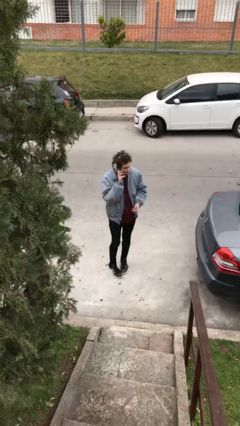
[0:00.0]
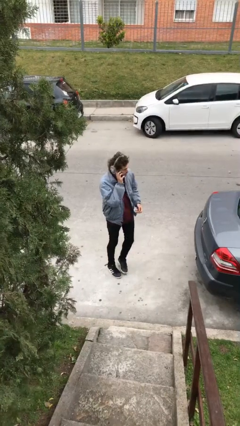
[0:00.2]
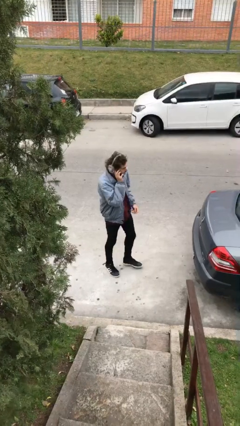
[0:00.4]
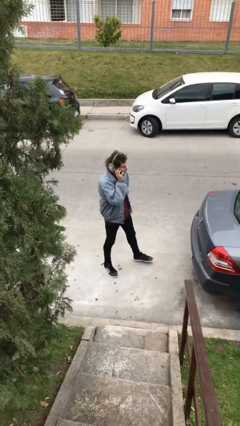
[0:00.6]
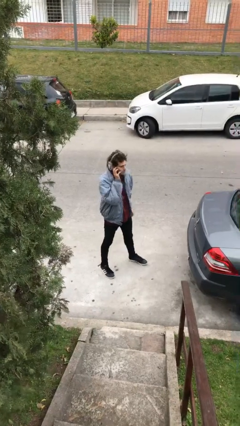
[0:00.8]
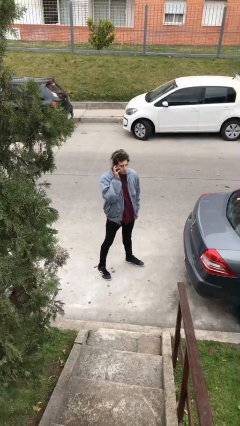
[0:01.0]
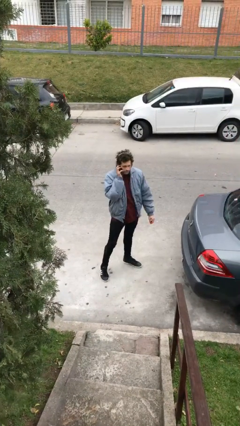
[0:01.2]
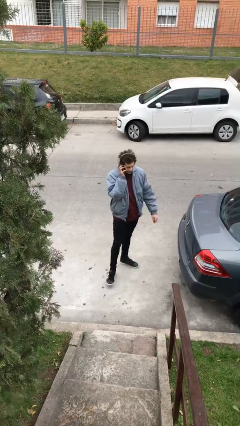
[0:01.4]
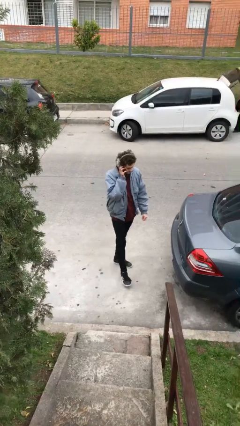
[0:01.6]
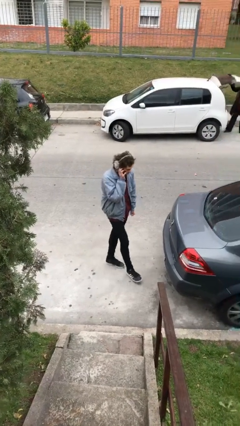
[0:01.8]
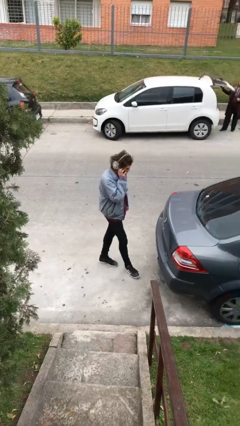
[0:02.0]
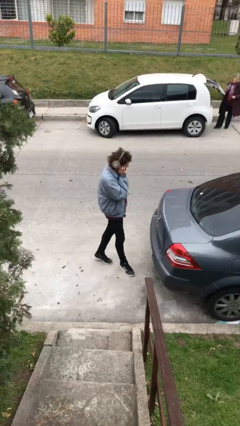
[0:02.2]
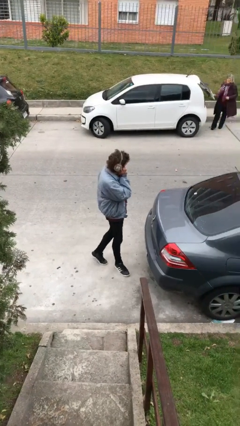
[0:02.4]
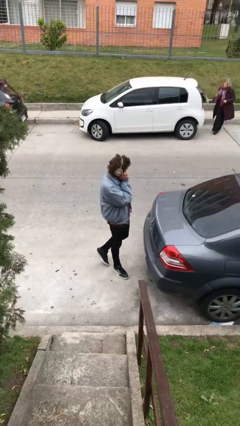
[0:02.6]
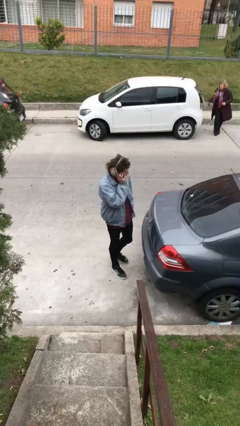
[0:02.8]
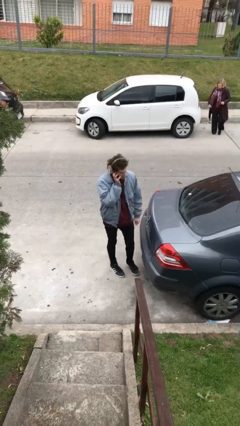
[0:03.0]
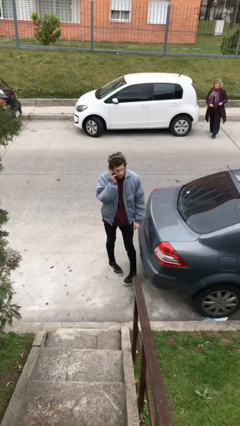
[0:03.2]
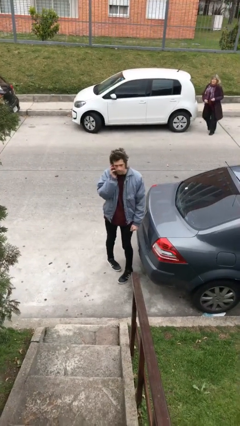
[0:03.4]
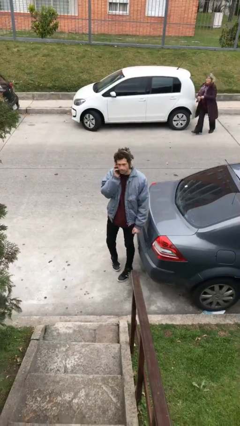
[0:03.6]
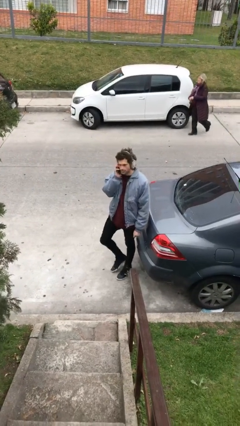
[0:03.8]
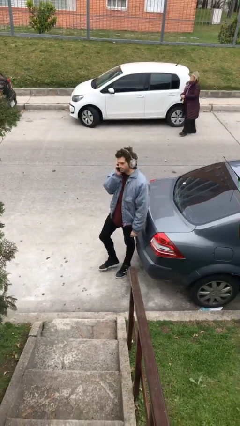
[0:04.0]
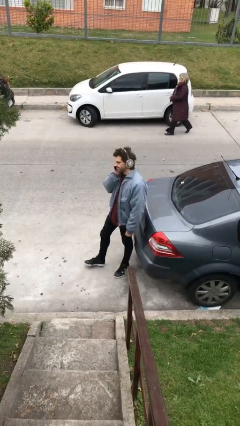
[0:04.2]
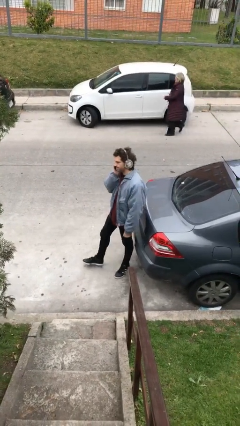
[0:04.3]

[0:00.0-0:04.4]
person talks on phone

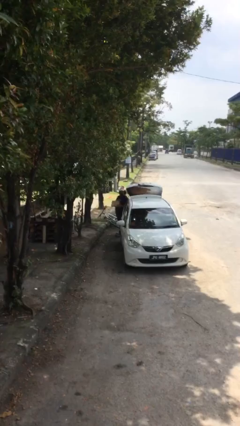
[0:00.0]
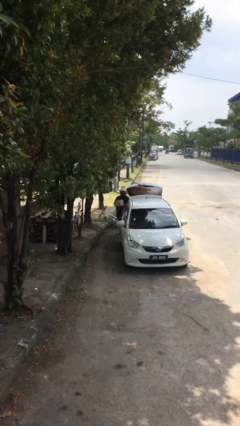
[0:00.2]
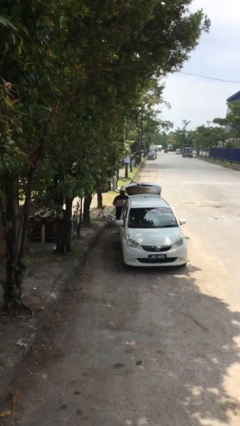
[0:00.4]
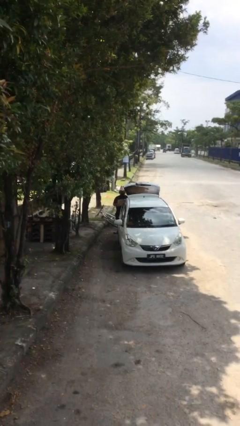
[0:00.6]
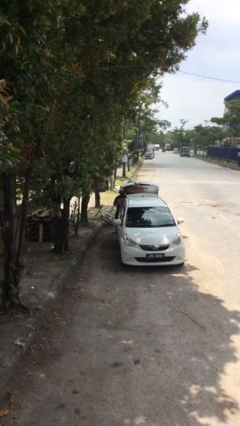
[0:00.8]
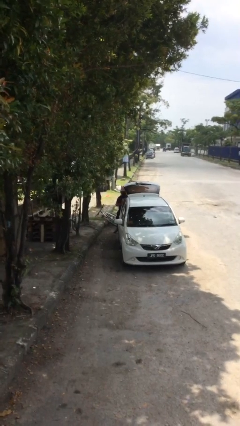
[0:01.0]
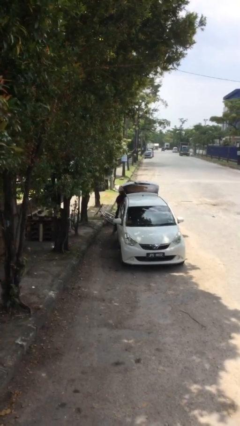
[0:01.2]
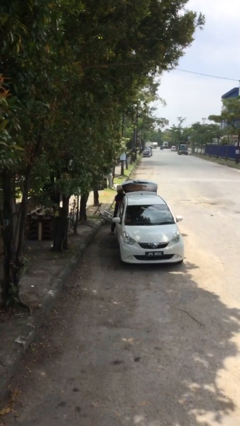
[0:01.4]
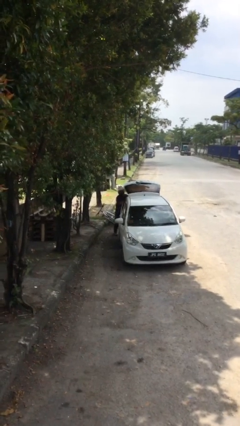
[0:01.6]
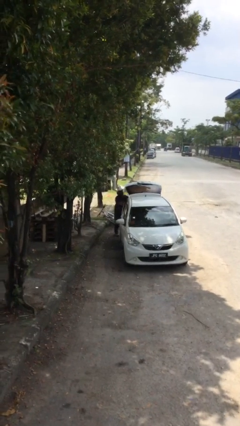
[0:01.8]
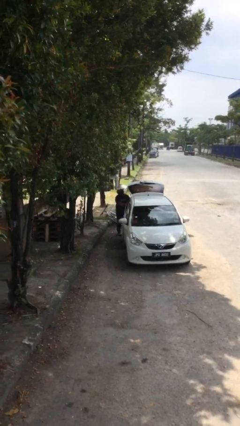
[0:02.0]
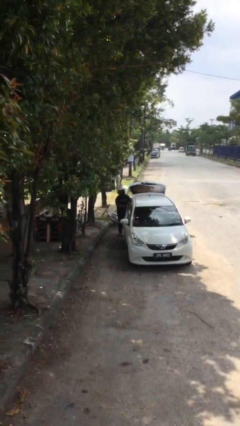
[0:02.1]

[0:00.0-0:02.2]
person loads car

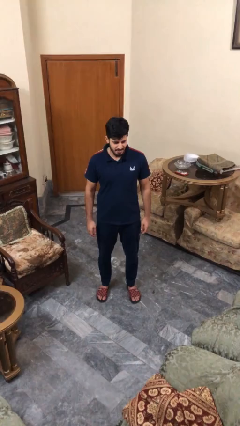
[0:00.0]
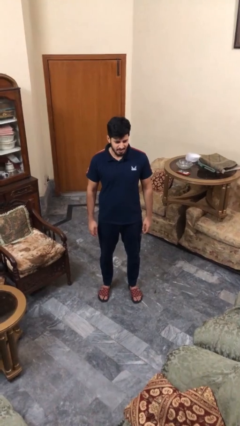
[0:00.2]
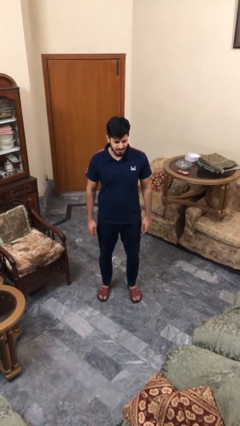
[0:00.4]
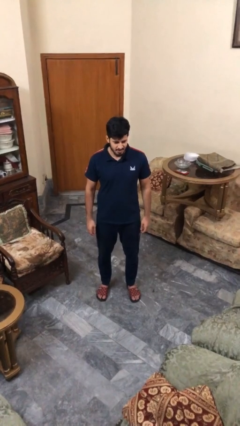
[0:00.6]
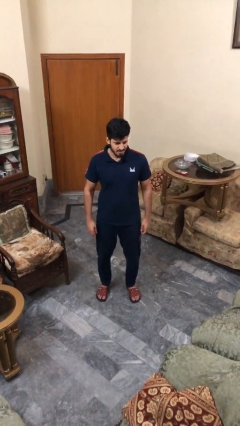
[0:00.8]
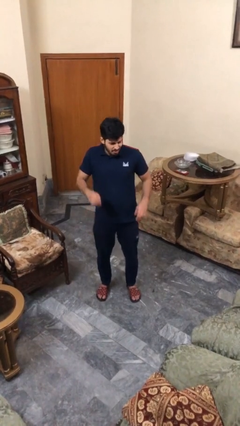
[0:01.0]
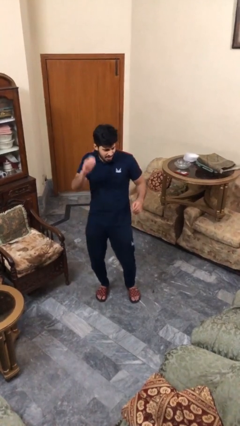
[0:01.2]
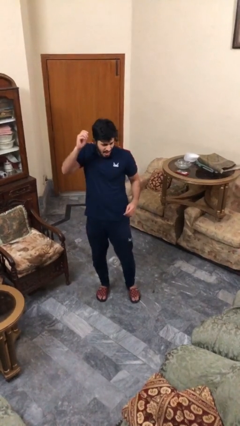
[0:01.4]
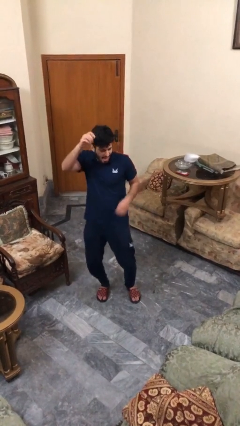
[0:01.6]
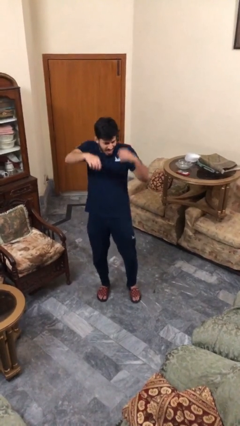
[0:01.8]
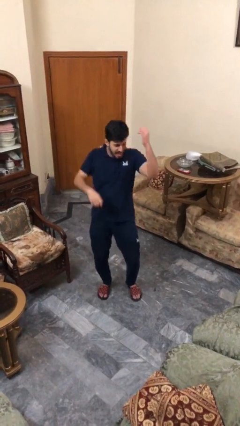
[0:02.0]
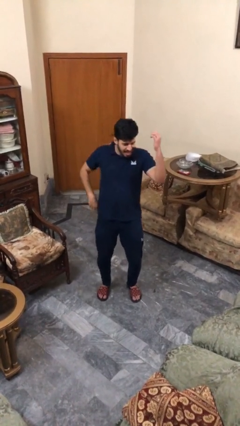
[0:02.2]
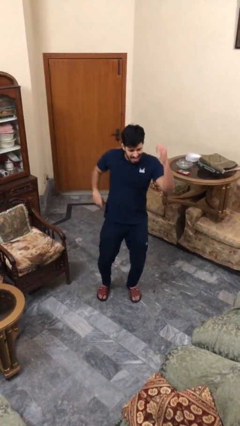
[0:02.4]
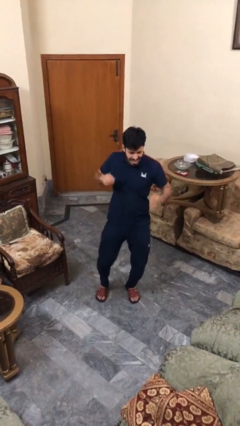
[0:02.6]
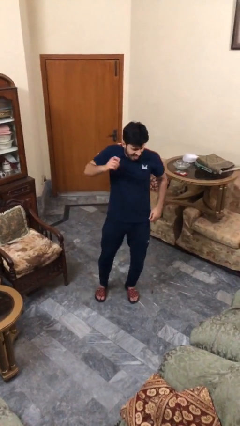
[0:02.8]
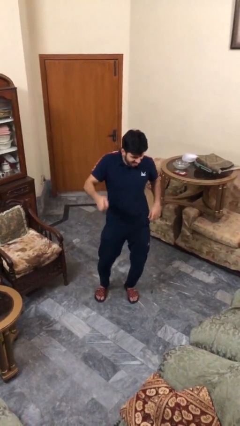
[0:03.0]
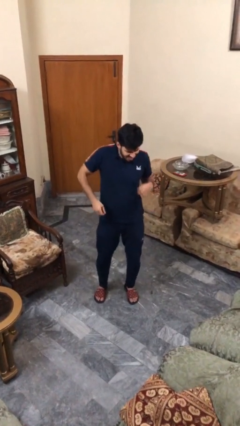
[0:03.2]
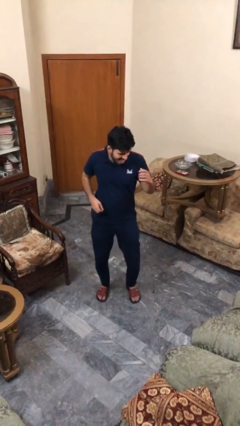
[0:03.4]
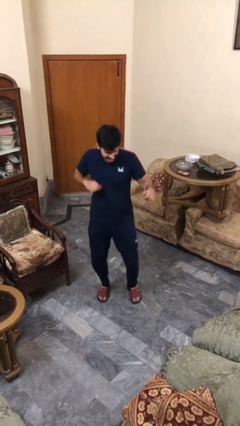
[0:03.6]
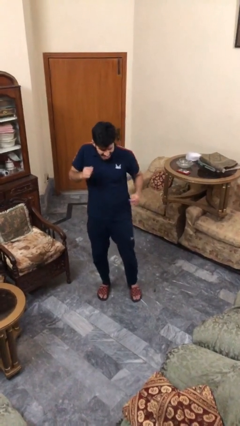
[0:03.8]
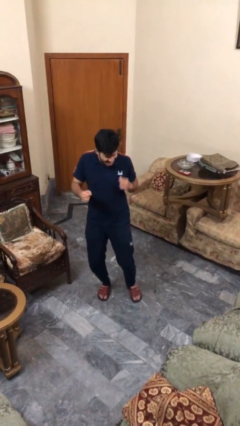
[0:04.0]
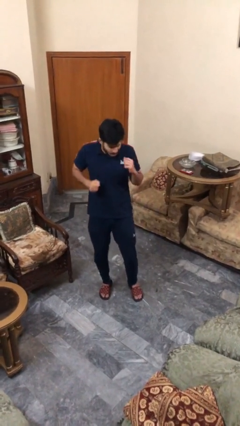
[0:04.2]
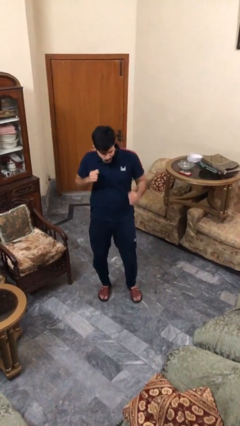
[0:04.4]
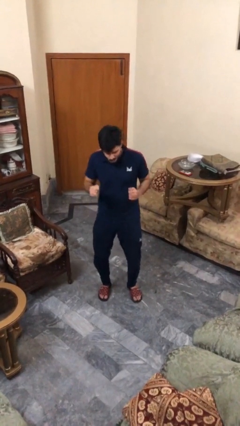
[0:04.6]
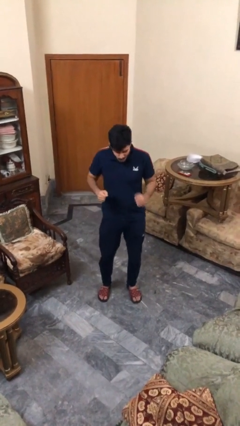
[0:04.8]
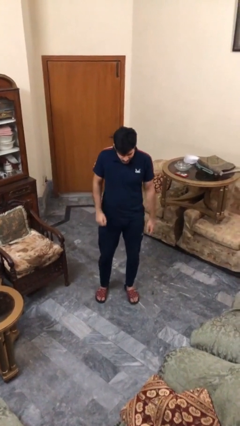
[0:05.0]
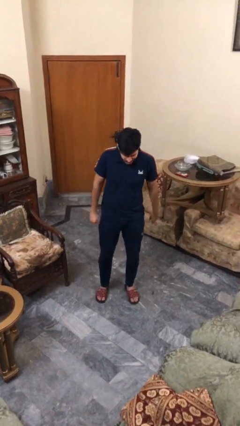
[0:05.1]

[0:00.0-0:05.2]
person dances in place

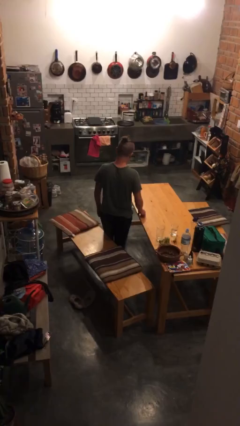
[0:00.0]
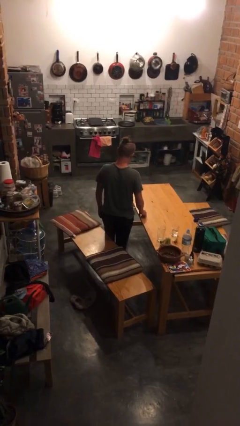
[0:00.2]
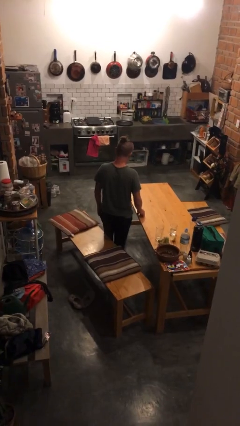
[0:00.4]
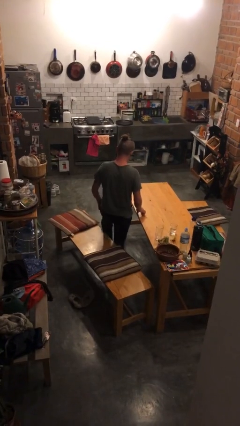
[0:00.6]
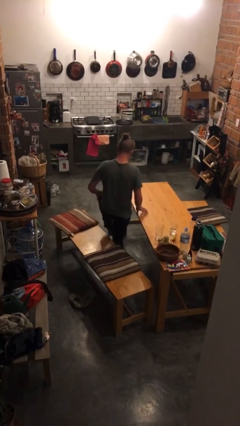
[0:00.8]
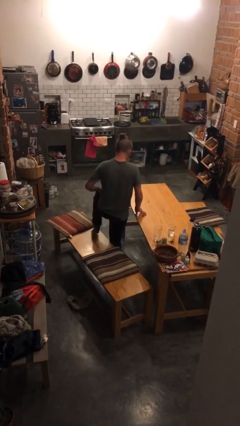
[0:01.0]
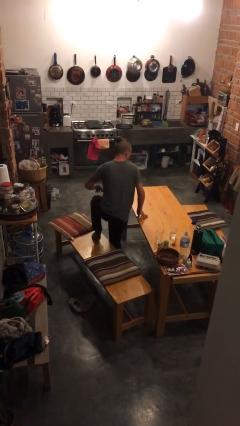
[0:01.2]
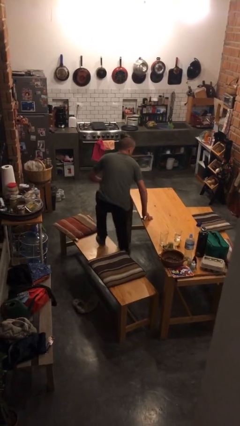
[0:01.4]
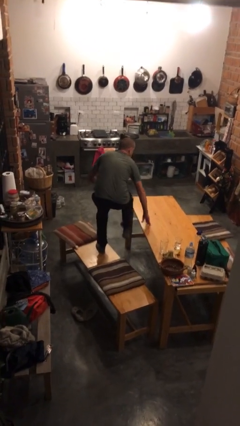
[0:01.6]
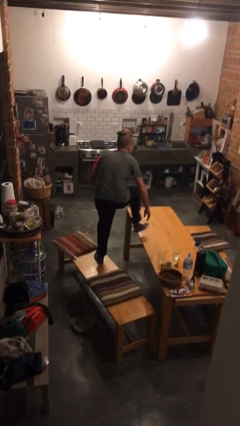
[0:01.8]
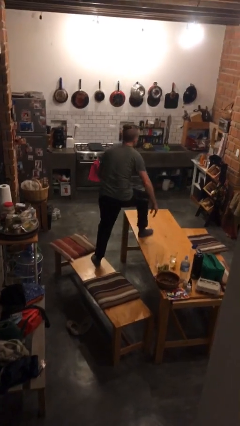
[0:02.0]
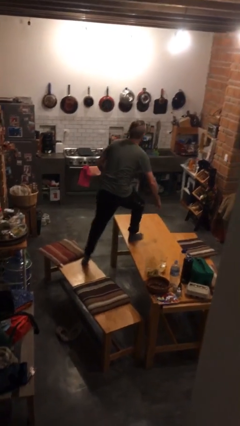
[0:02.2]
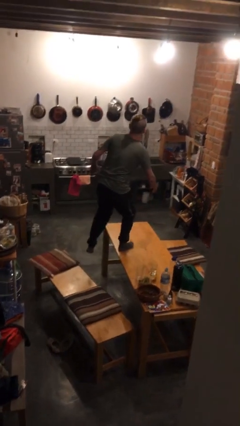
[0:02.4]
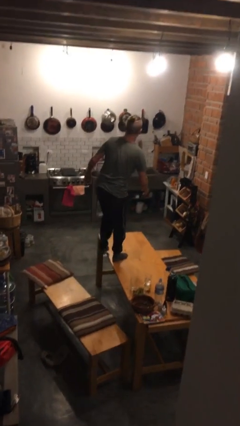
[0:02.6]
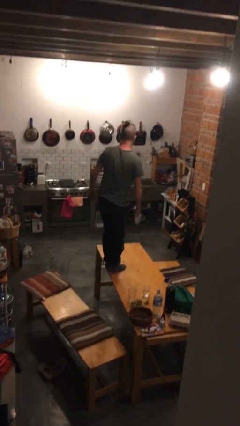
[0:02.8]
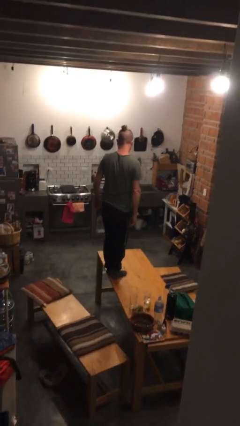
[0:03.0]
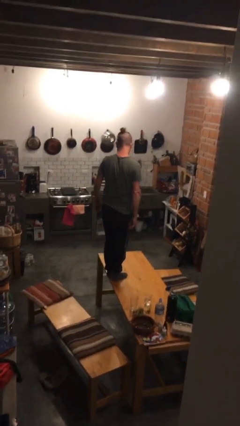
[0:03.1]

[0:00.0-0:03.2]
person climbs on table

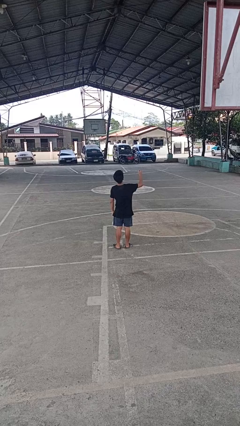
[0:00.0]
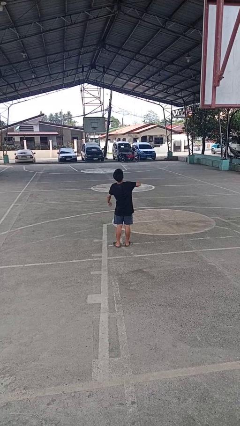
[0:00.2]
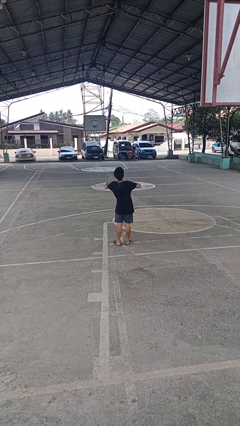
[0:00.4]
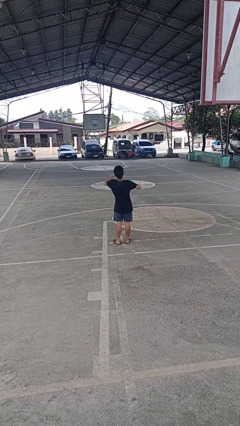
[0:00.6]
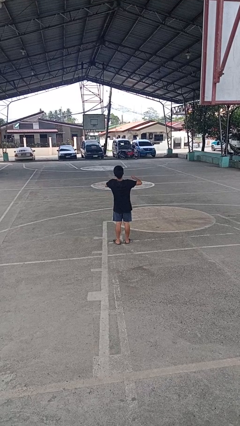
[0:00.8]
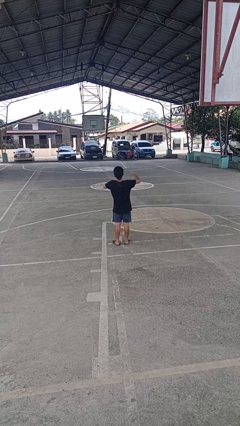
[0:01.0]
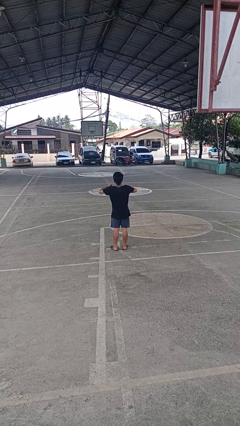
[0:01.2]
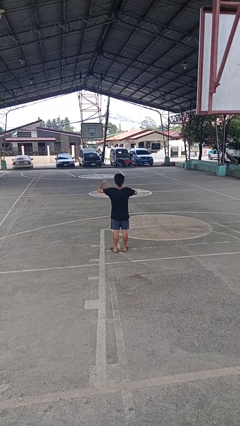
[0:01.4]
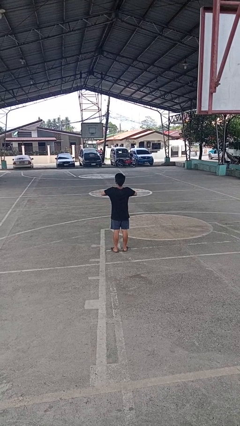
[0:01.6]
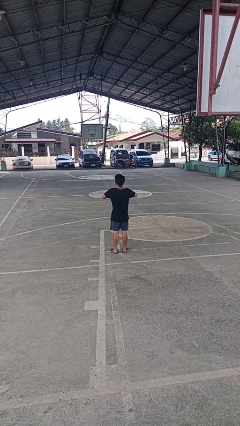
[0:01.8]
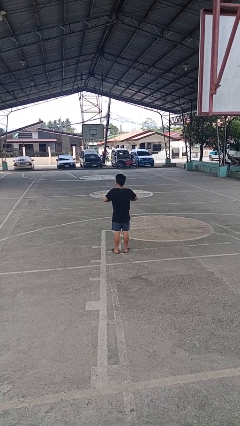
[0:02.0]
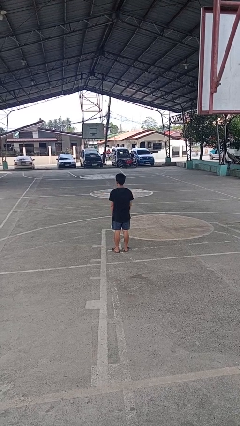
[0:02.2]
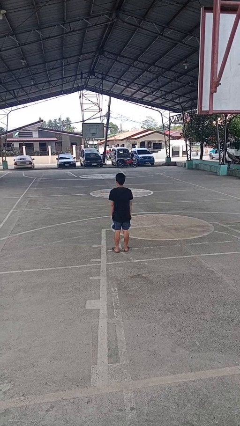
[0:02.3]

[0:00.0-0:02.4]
person drums on chest
